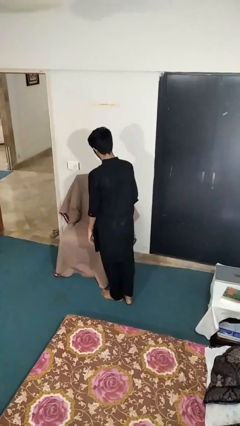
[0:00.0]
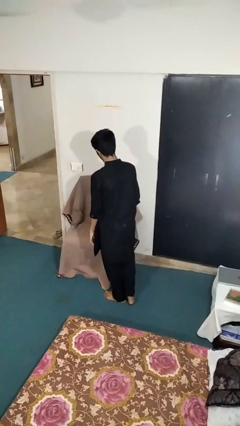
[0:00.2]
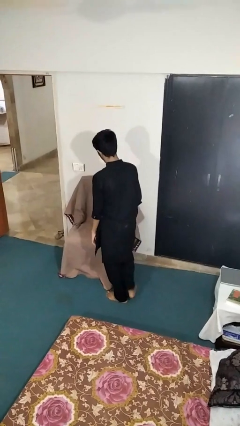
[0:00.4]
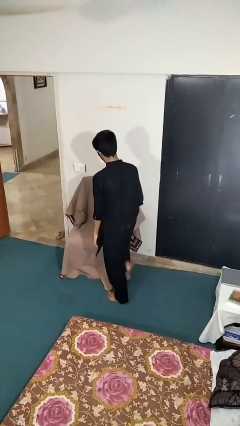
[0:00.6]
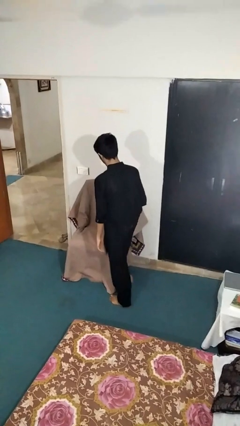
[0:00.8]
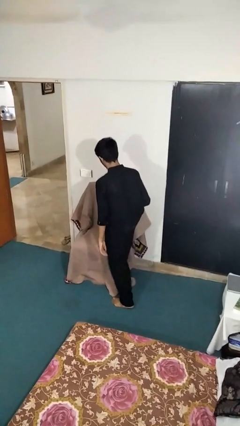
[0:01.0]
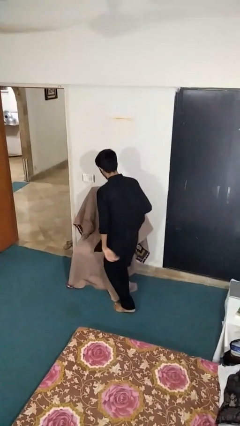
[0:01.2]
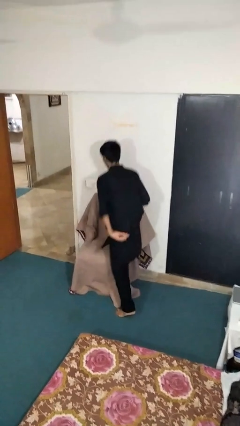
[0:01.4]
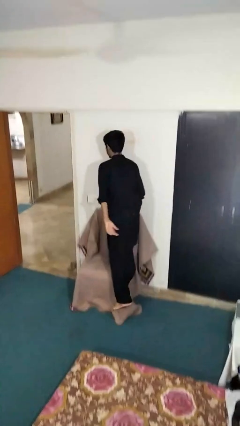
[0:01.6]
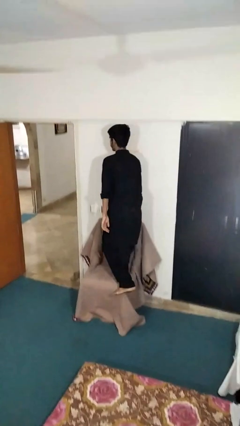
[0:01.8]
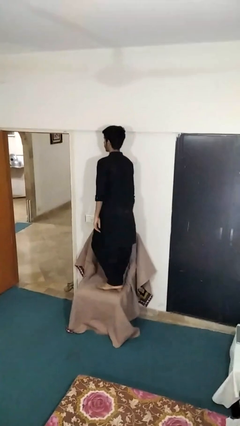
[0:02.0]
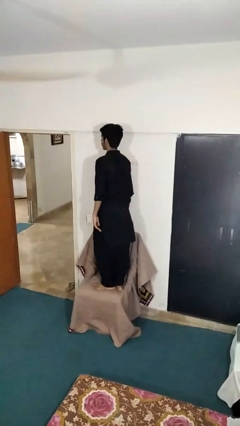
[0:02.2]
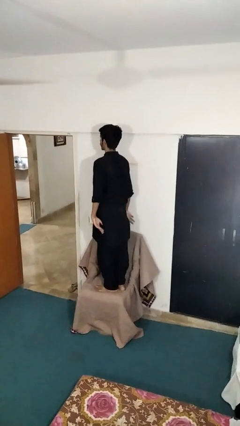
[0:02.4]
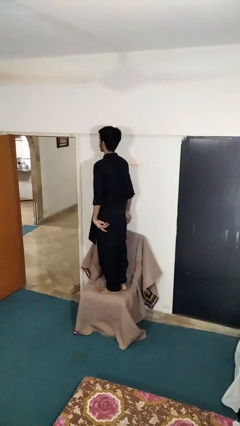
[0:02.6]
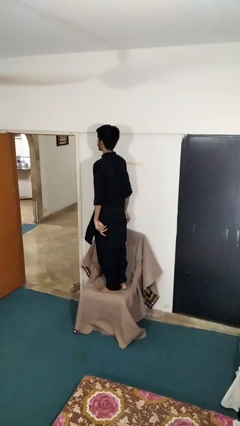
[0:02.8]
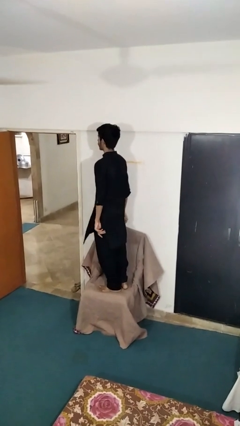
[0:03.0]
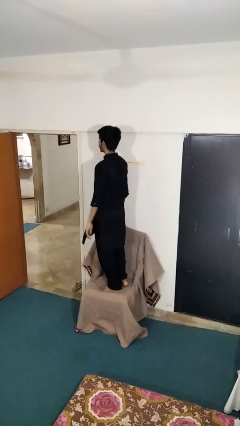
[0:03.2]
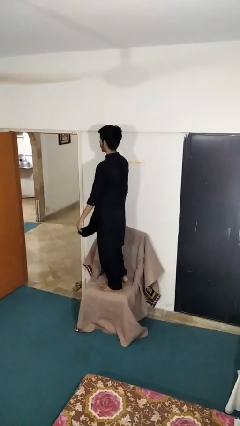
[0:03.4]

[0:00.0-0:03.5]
person climbs on couch

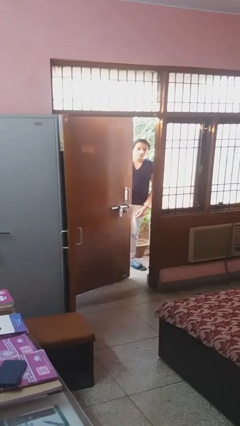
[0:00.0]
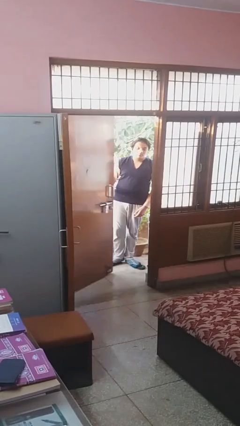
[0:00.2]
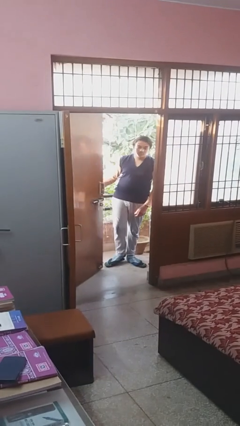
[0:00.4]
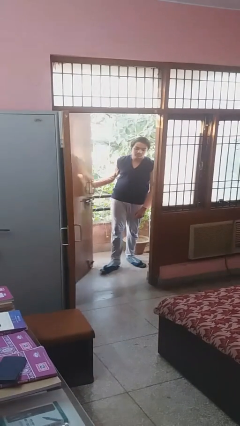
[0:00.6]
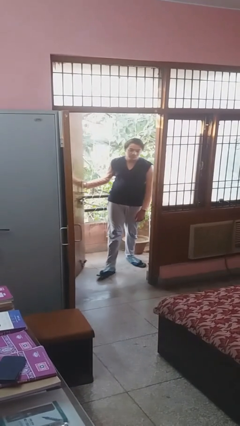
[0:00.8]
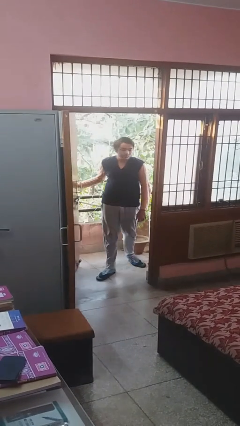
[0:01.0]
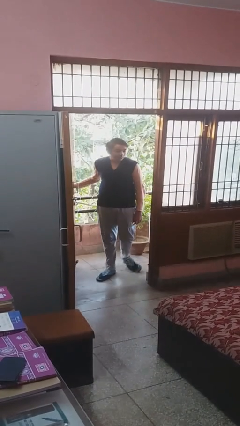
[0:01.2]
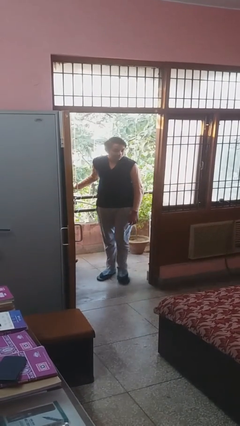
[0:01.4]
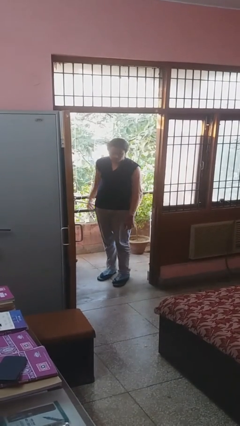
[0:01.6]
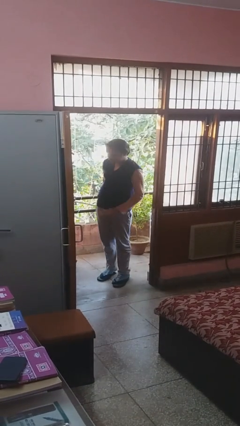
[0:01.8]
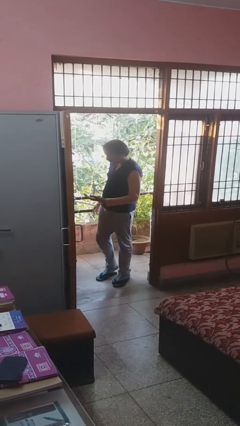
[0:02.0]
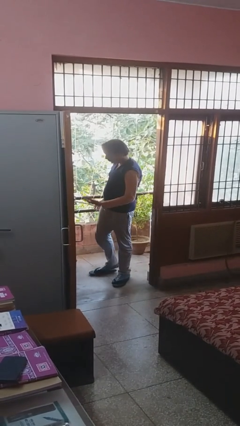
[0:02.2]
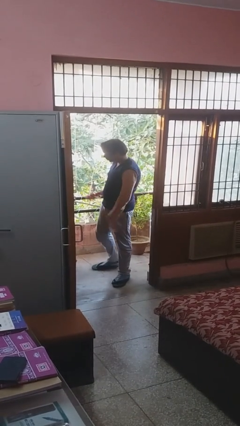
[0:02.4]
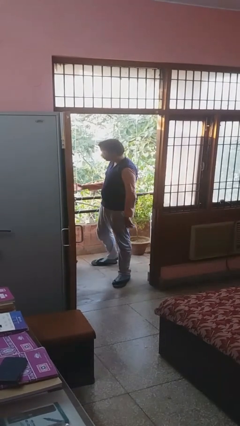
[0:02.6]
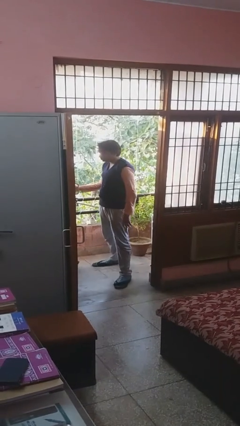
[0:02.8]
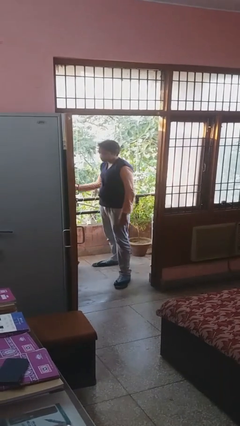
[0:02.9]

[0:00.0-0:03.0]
person opens facility door

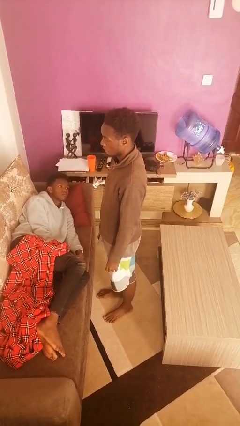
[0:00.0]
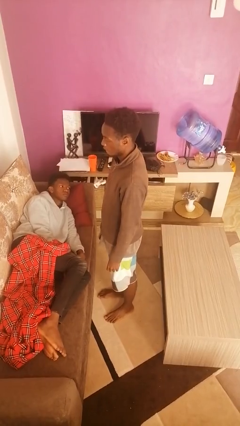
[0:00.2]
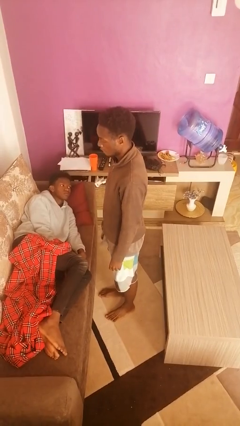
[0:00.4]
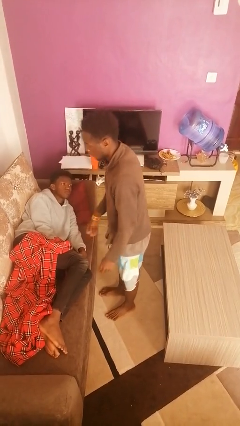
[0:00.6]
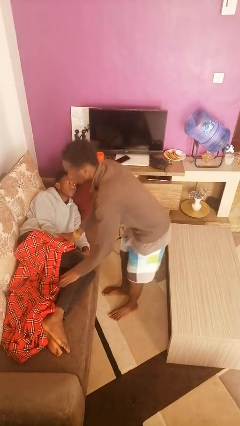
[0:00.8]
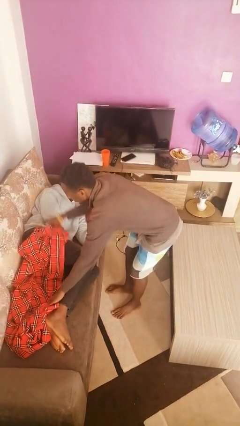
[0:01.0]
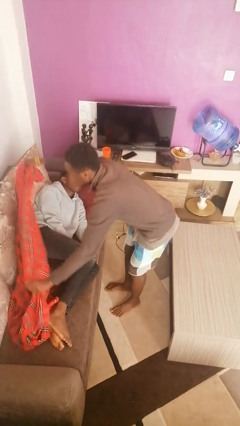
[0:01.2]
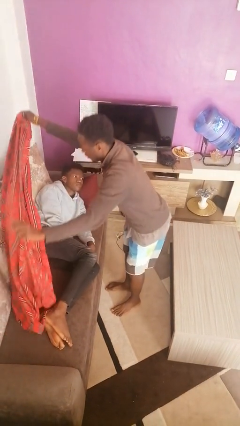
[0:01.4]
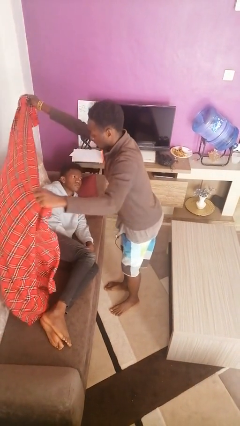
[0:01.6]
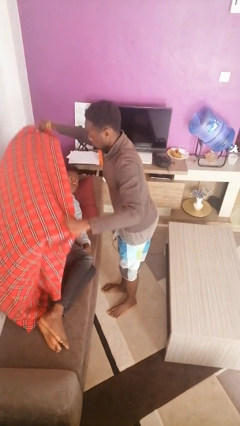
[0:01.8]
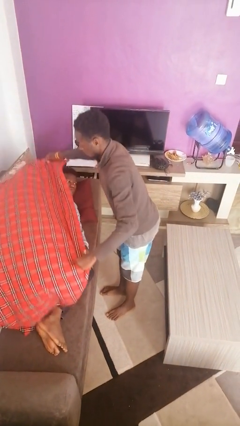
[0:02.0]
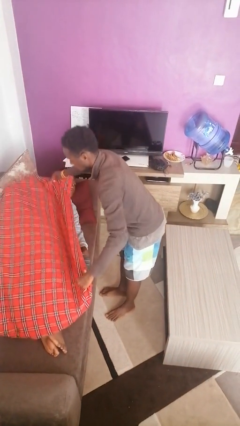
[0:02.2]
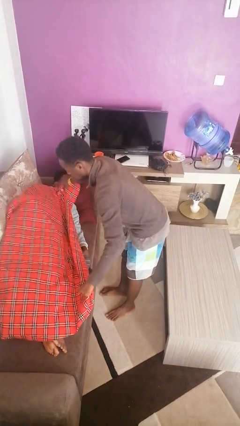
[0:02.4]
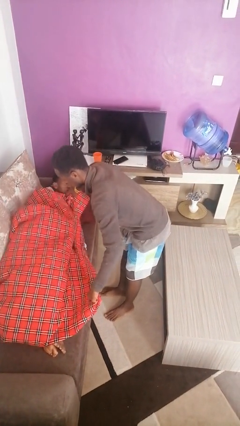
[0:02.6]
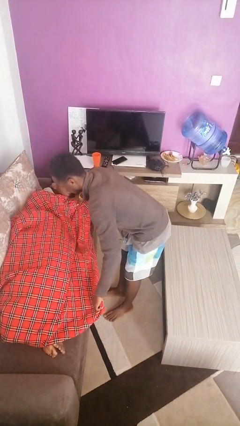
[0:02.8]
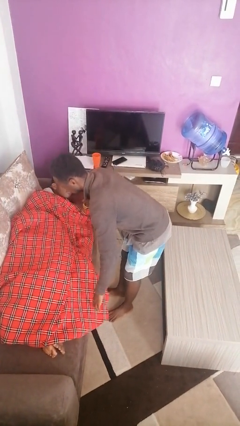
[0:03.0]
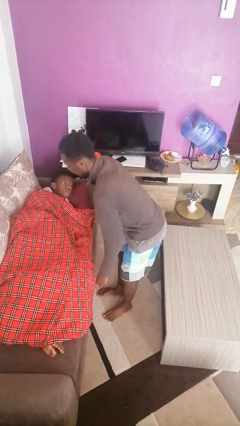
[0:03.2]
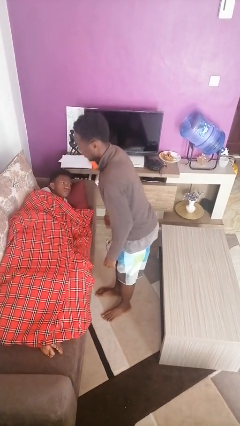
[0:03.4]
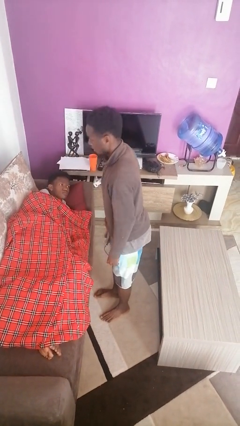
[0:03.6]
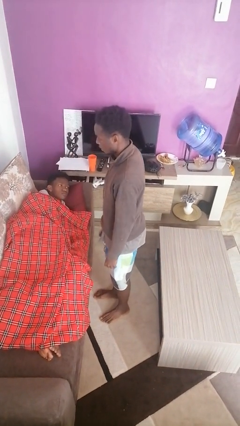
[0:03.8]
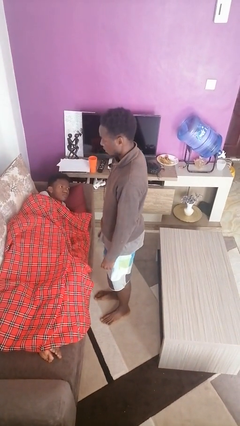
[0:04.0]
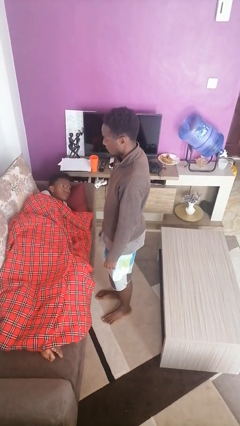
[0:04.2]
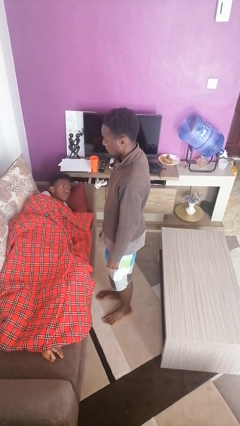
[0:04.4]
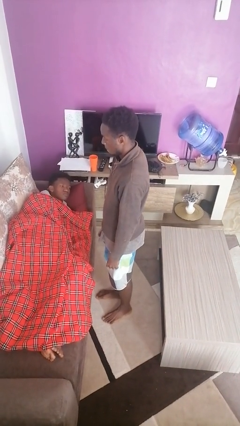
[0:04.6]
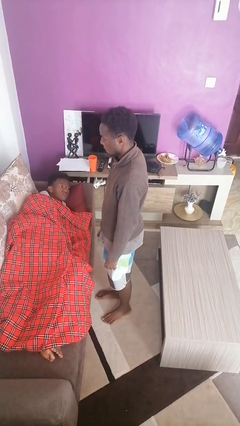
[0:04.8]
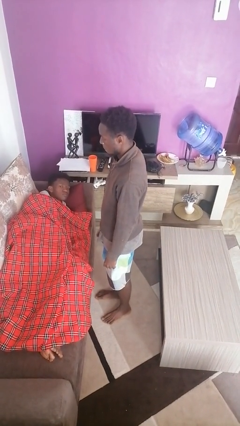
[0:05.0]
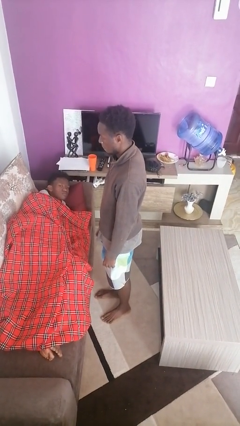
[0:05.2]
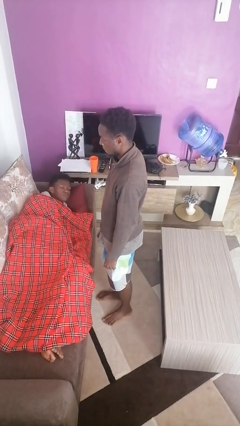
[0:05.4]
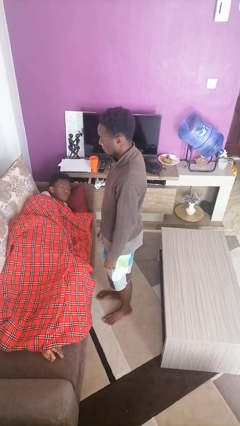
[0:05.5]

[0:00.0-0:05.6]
person covers friend with blanket

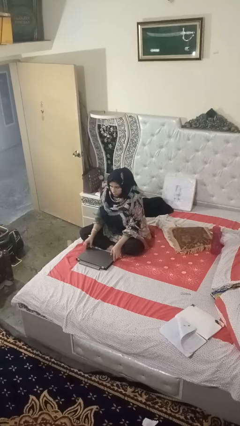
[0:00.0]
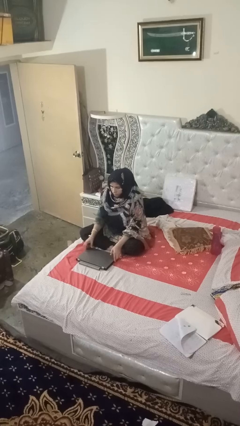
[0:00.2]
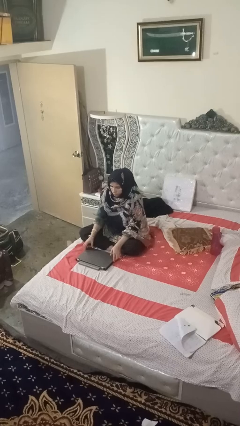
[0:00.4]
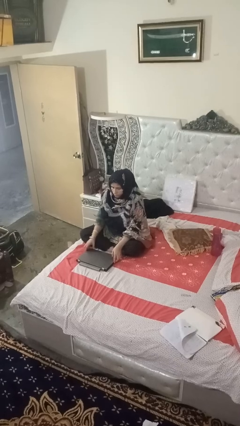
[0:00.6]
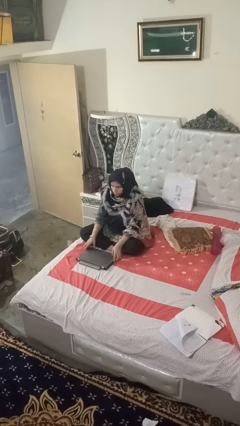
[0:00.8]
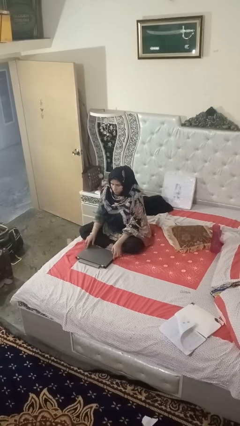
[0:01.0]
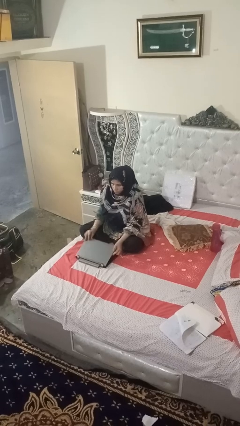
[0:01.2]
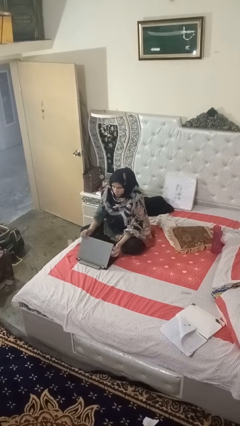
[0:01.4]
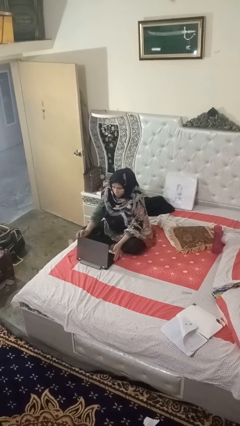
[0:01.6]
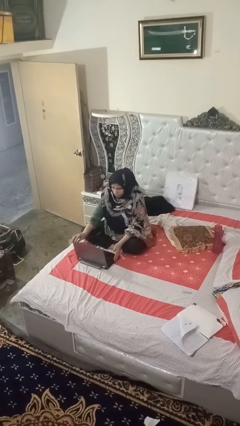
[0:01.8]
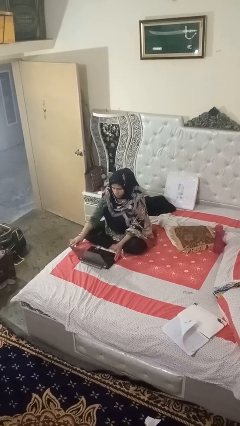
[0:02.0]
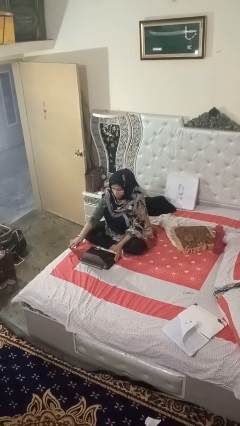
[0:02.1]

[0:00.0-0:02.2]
person opens laptop

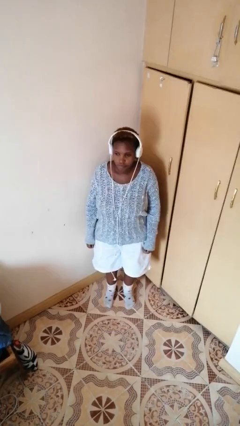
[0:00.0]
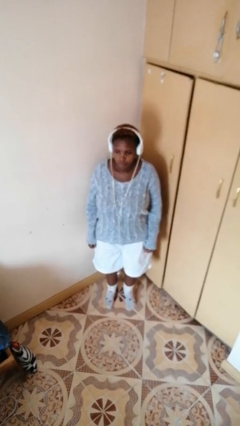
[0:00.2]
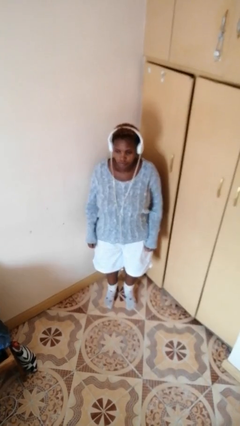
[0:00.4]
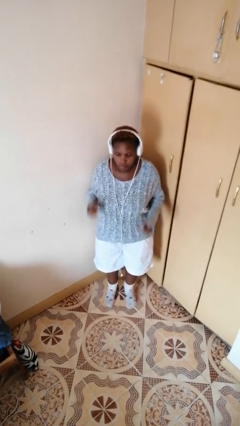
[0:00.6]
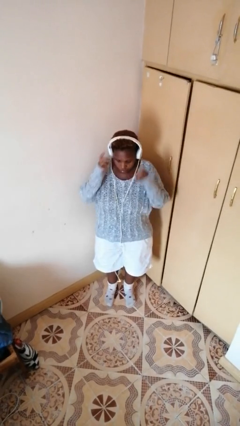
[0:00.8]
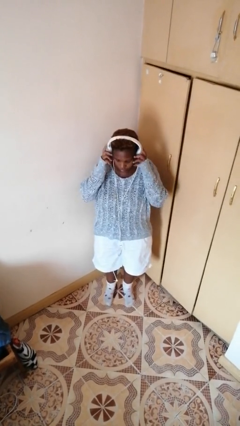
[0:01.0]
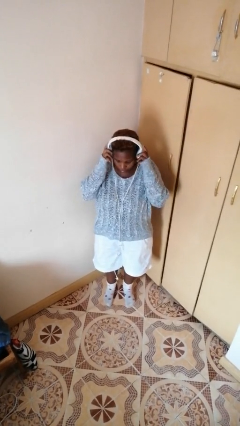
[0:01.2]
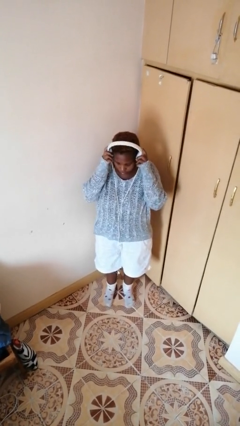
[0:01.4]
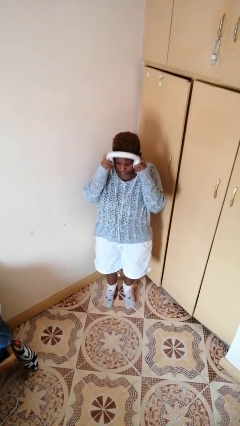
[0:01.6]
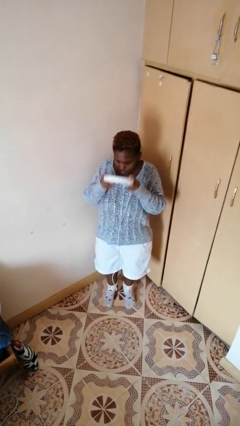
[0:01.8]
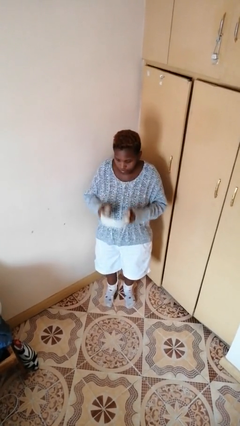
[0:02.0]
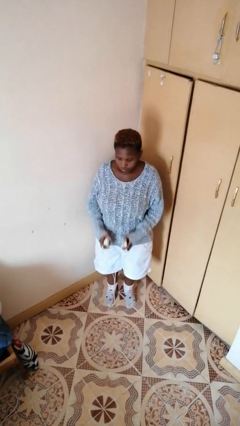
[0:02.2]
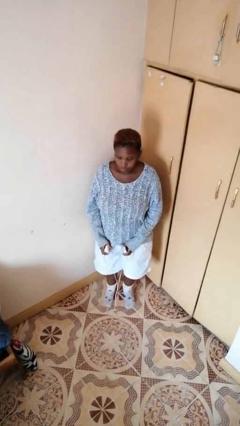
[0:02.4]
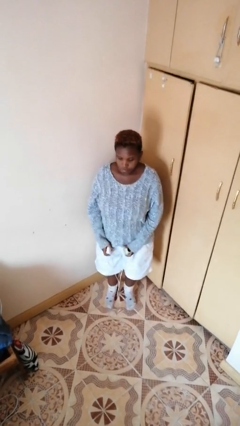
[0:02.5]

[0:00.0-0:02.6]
person takes off headphones

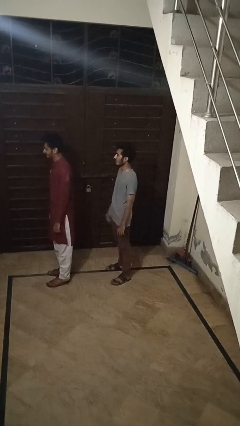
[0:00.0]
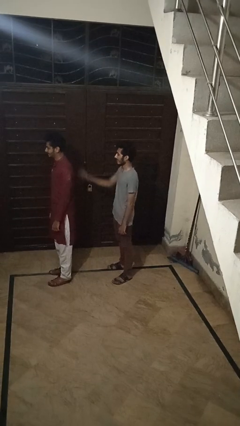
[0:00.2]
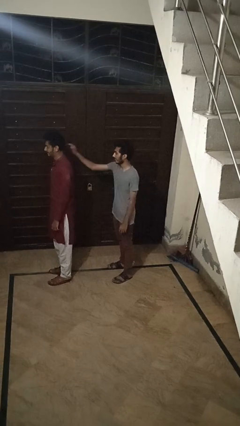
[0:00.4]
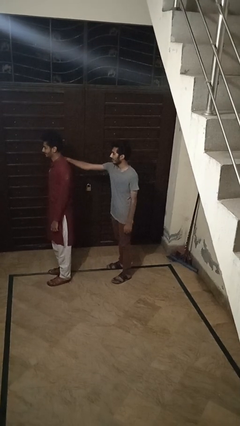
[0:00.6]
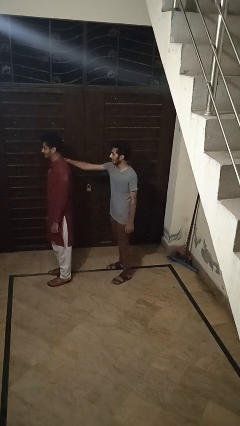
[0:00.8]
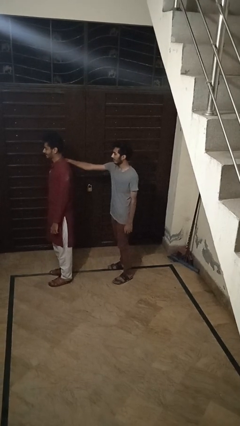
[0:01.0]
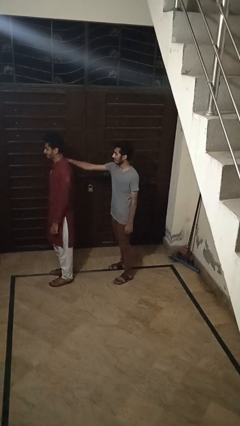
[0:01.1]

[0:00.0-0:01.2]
person grabs person by shoulder
